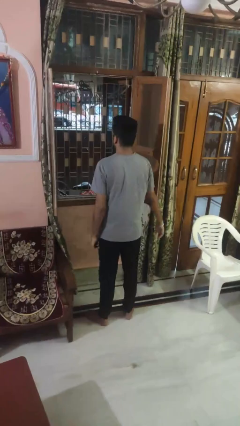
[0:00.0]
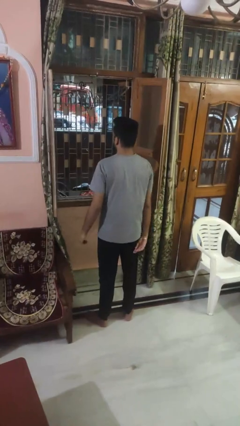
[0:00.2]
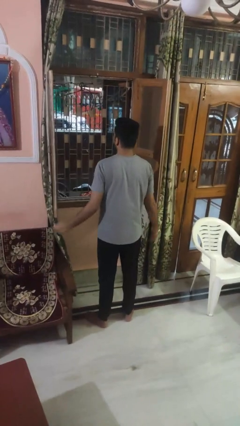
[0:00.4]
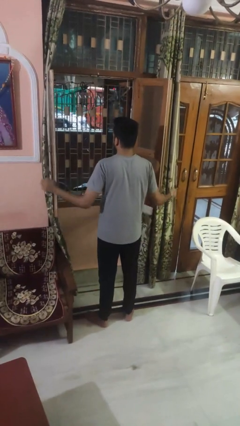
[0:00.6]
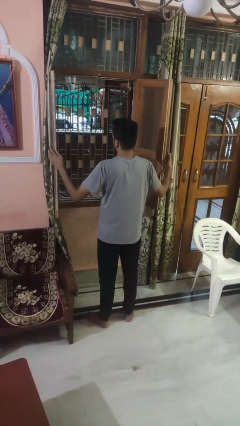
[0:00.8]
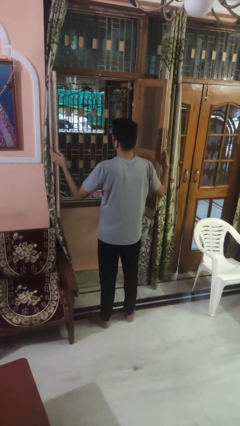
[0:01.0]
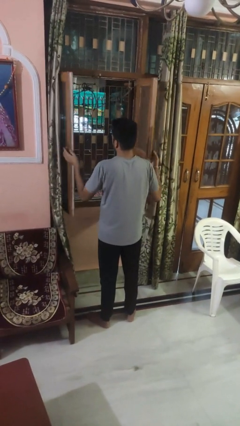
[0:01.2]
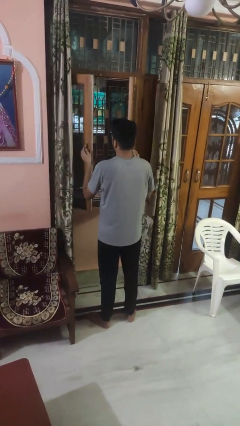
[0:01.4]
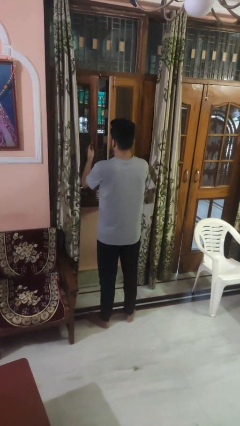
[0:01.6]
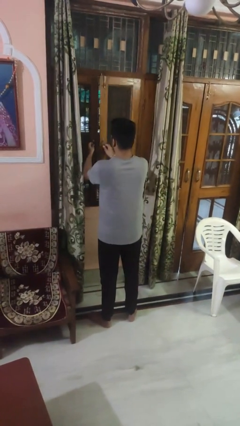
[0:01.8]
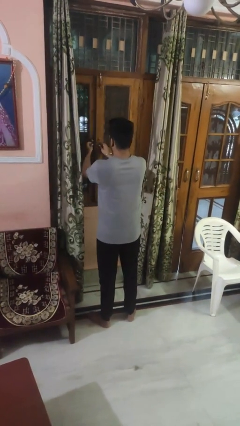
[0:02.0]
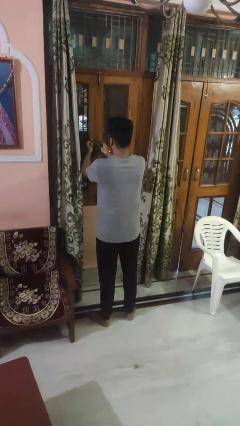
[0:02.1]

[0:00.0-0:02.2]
person closes home window

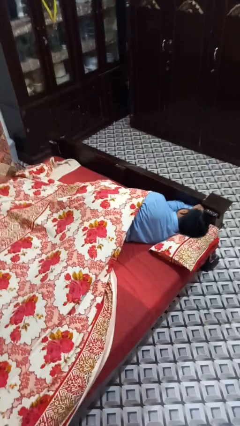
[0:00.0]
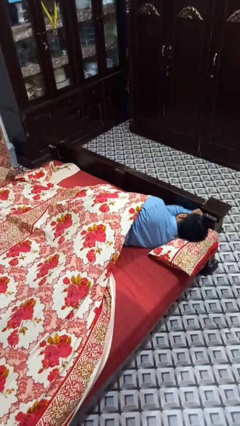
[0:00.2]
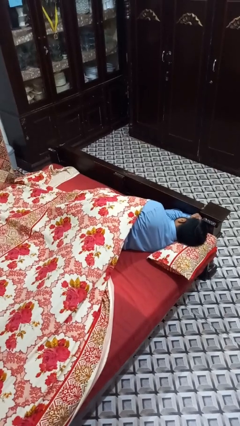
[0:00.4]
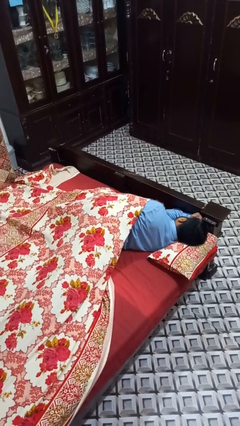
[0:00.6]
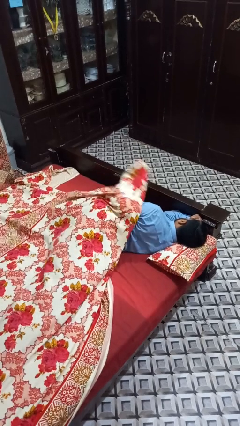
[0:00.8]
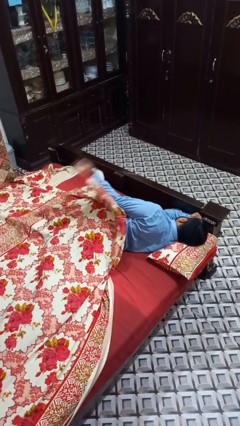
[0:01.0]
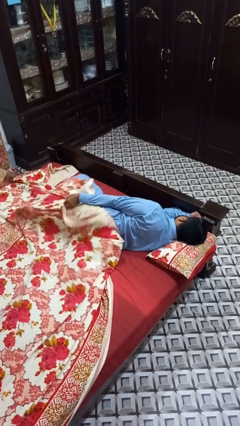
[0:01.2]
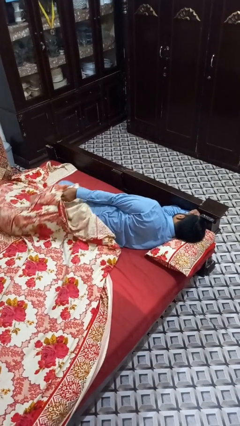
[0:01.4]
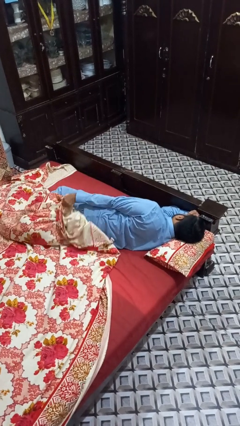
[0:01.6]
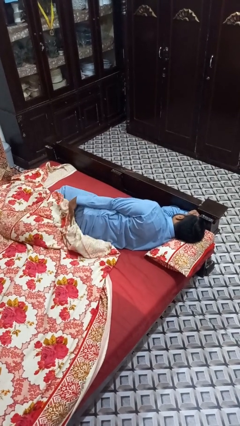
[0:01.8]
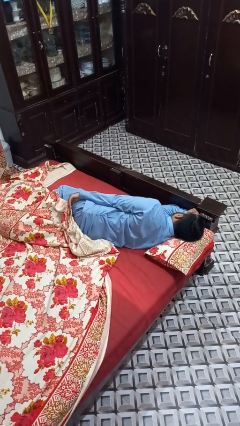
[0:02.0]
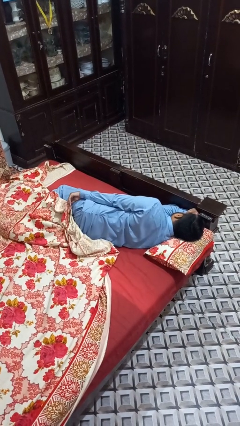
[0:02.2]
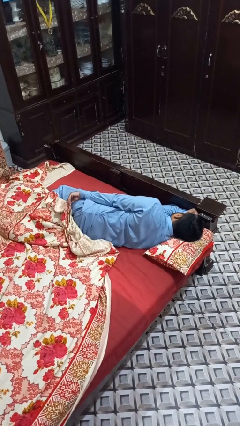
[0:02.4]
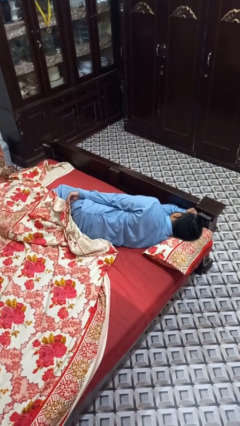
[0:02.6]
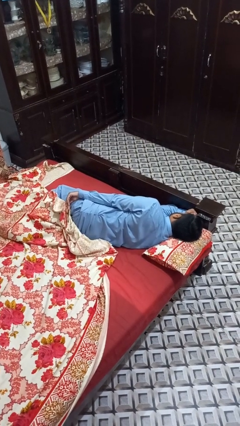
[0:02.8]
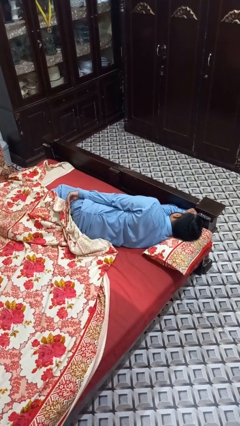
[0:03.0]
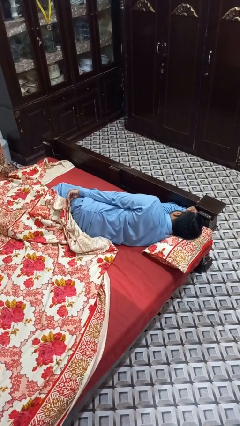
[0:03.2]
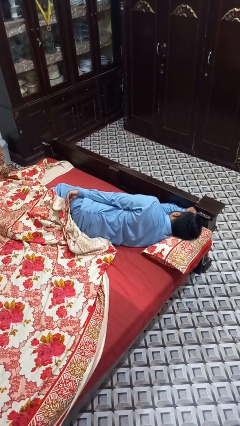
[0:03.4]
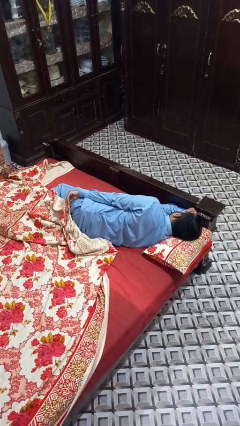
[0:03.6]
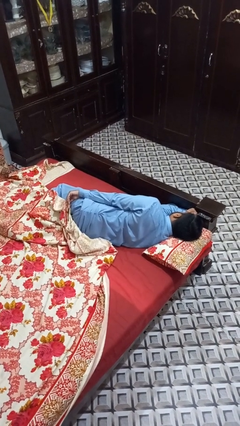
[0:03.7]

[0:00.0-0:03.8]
person uncovers with bedsheets

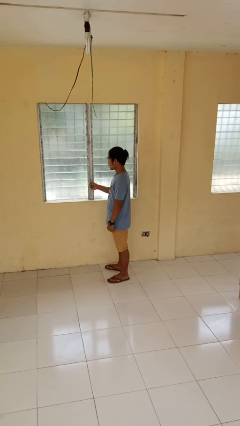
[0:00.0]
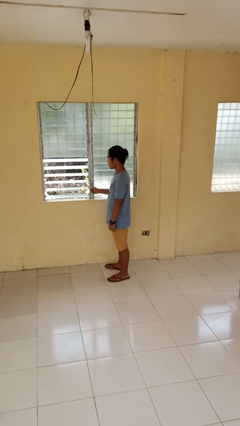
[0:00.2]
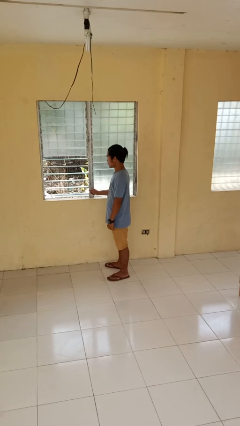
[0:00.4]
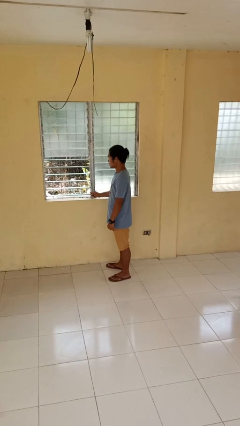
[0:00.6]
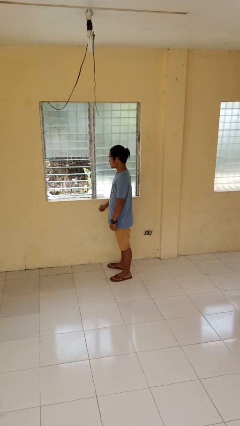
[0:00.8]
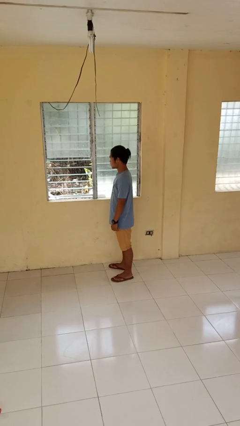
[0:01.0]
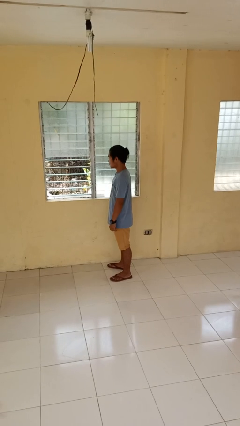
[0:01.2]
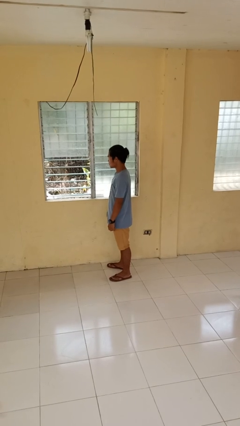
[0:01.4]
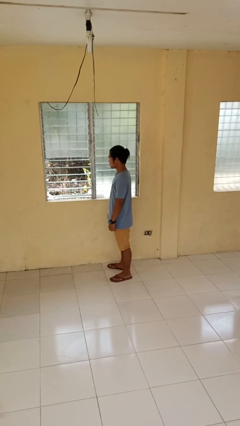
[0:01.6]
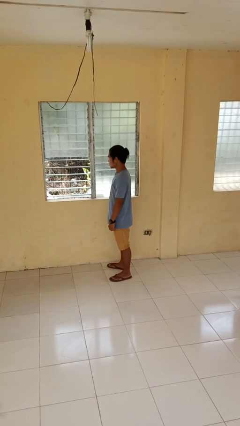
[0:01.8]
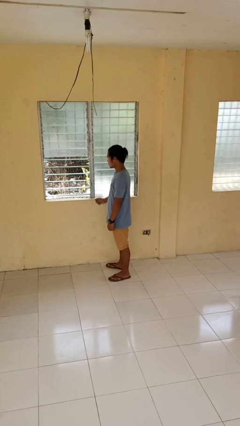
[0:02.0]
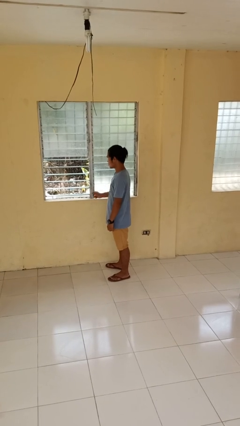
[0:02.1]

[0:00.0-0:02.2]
person opens home window

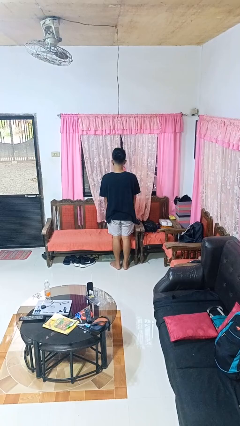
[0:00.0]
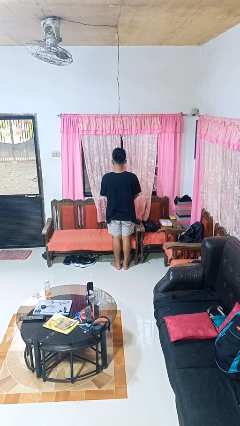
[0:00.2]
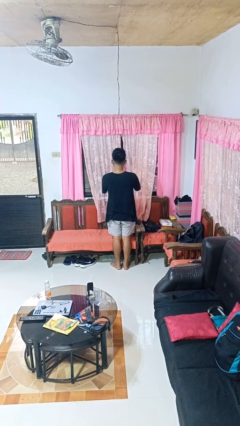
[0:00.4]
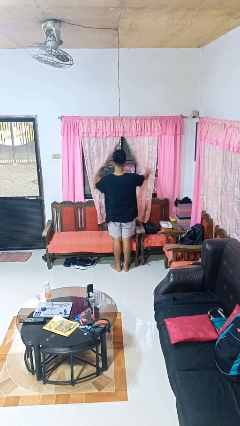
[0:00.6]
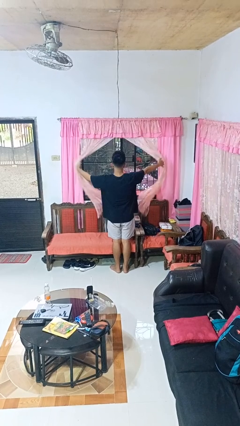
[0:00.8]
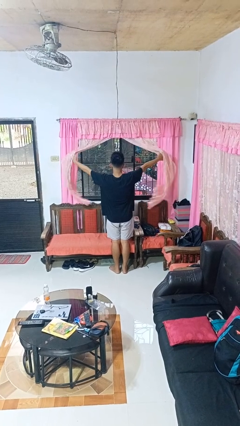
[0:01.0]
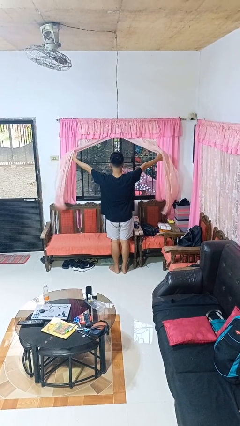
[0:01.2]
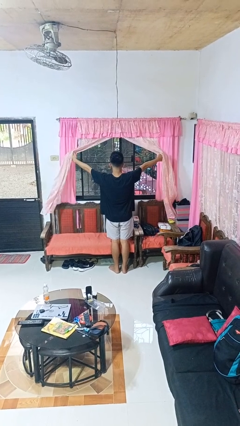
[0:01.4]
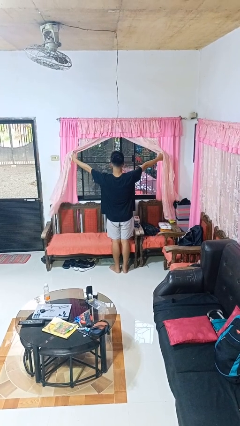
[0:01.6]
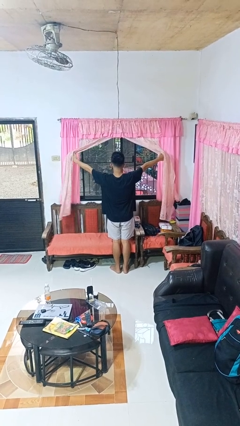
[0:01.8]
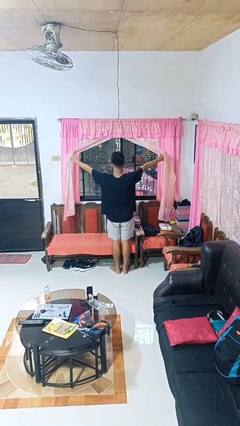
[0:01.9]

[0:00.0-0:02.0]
person opens curtains

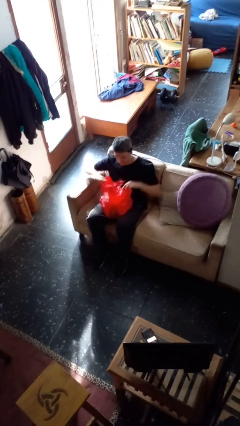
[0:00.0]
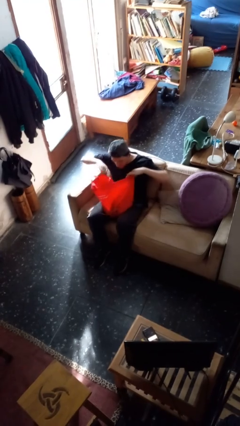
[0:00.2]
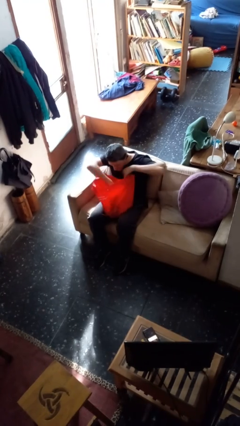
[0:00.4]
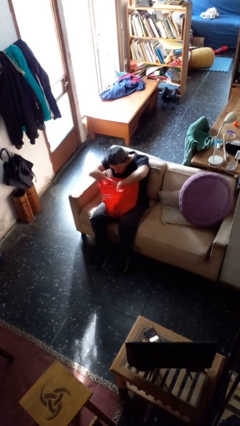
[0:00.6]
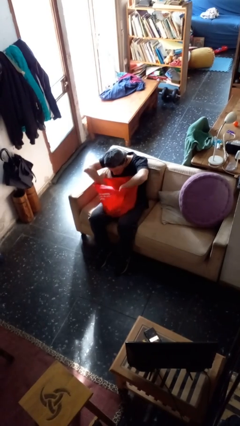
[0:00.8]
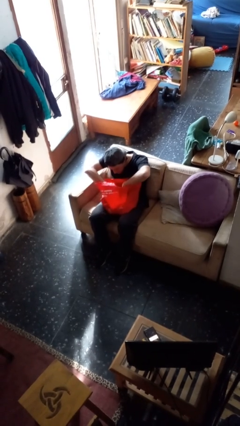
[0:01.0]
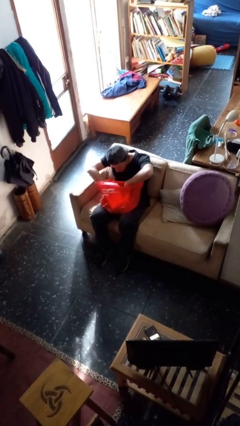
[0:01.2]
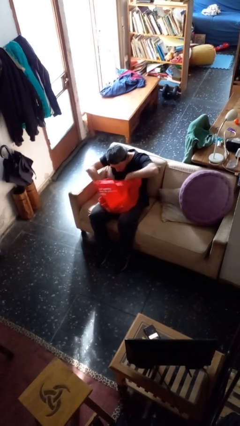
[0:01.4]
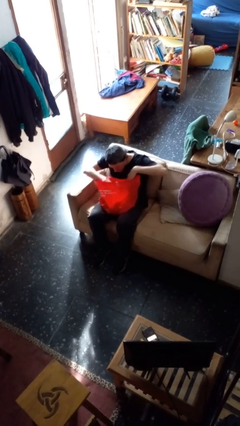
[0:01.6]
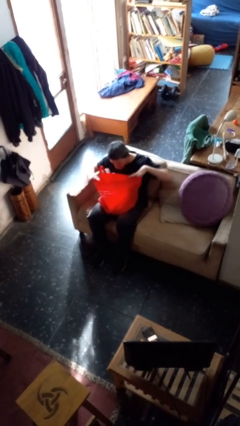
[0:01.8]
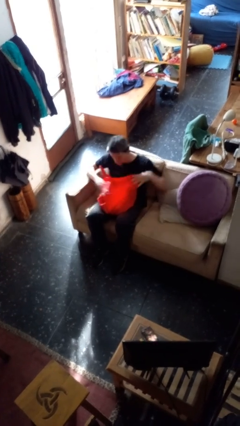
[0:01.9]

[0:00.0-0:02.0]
person searches in bag

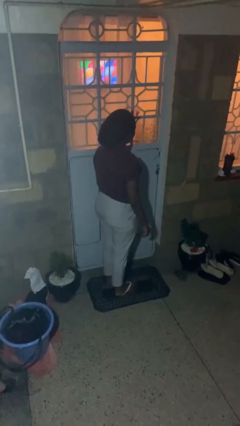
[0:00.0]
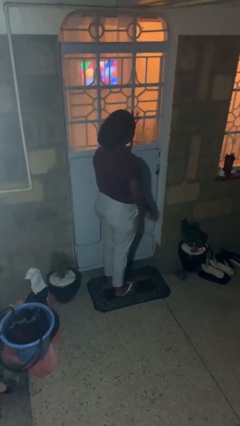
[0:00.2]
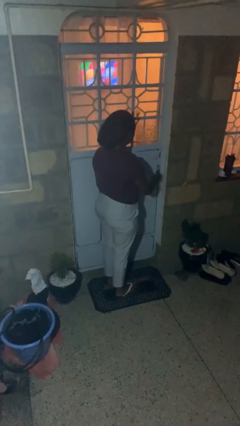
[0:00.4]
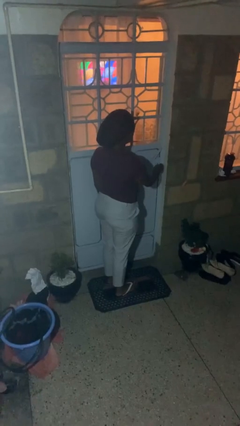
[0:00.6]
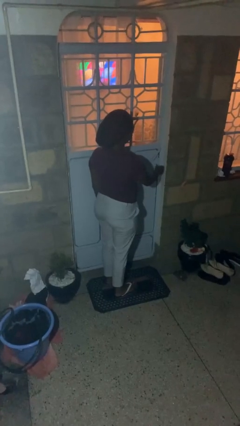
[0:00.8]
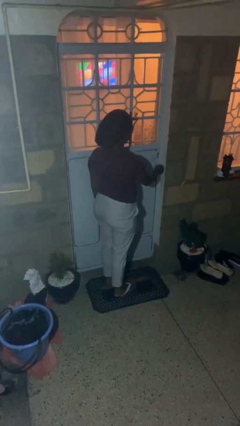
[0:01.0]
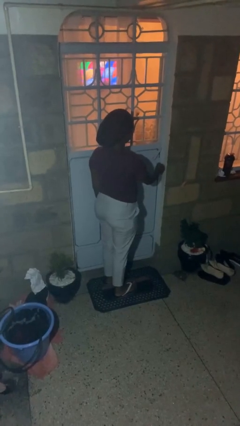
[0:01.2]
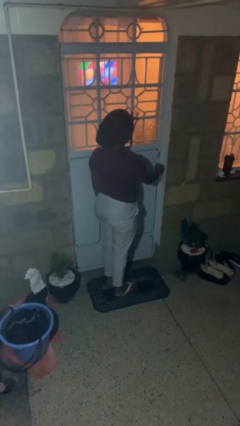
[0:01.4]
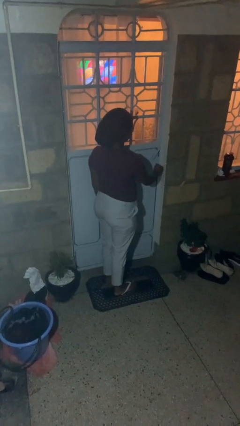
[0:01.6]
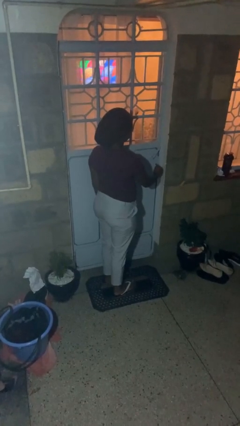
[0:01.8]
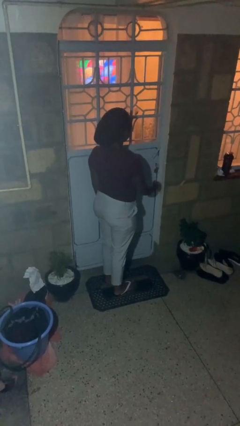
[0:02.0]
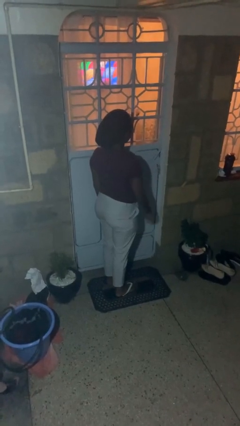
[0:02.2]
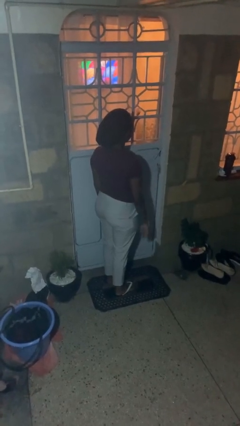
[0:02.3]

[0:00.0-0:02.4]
person unlocks door with keys

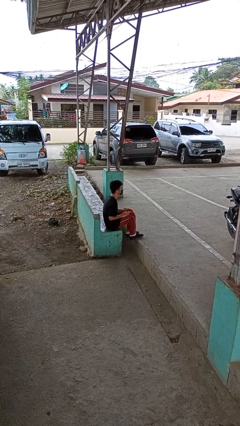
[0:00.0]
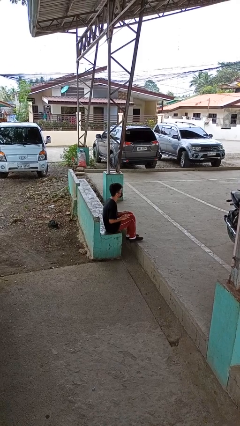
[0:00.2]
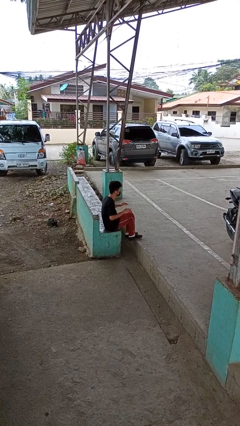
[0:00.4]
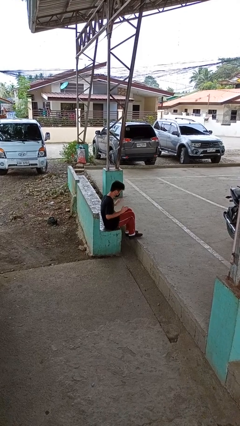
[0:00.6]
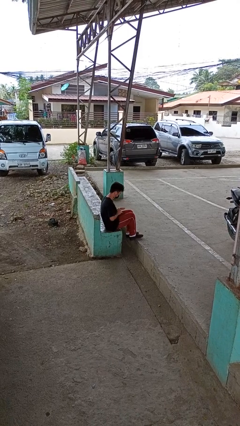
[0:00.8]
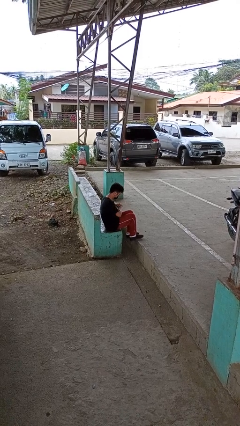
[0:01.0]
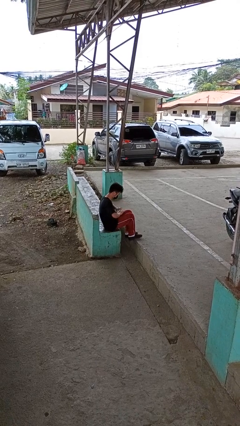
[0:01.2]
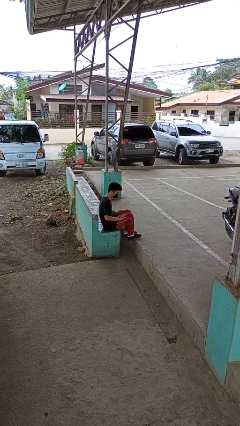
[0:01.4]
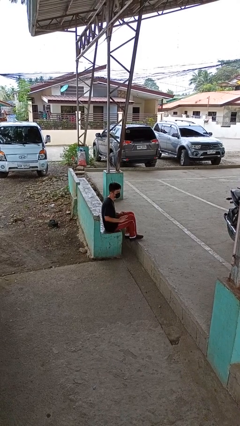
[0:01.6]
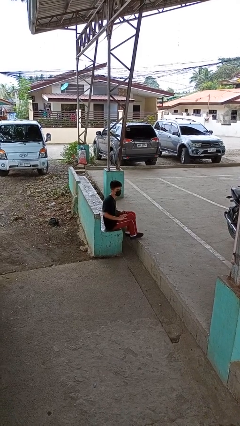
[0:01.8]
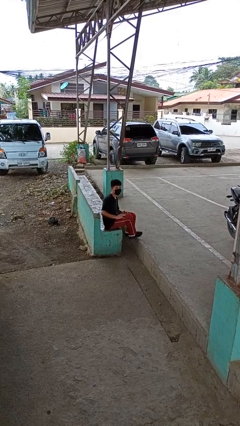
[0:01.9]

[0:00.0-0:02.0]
person slaps hands on thighs

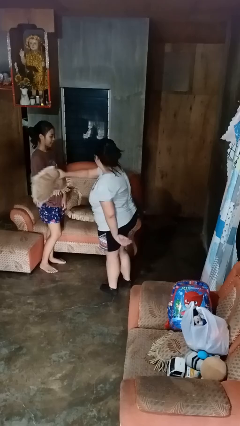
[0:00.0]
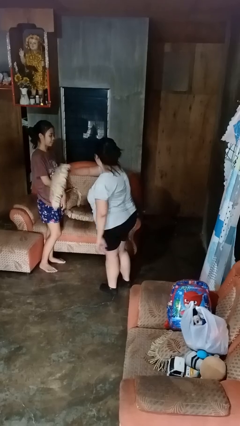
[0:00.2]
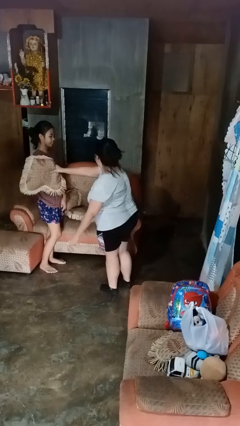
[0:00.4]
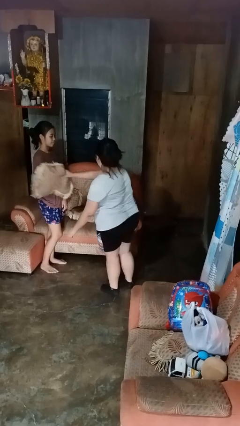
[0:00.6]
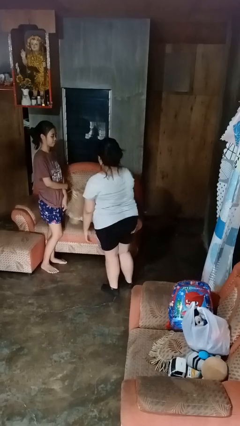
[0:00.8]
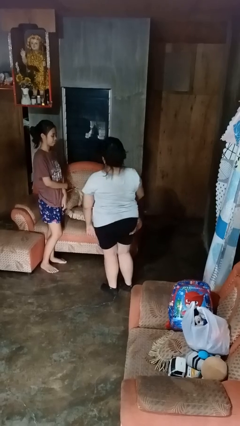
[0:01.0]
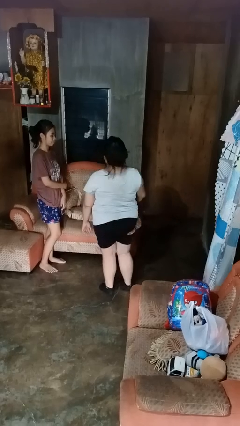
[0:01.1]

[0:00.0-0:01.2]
person hits person with pillow
